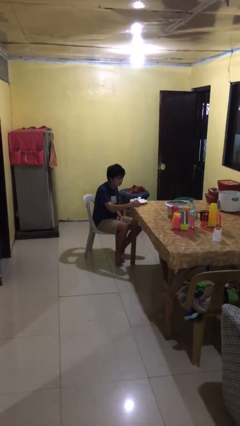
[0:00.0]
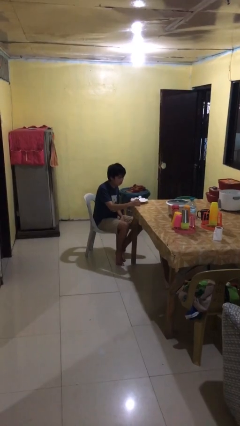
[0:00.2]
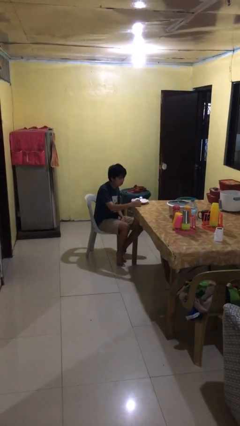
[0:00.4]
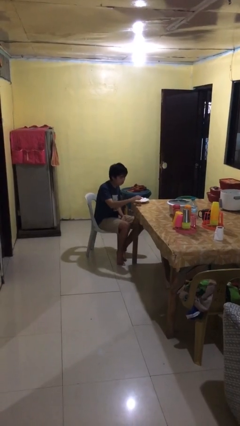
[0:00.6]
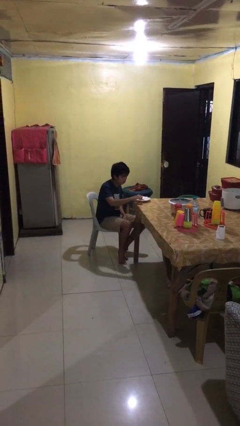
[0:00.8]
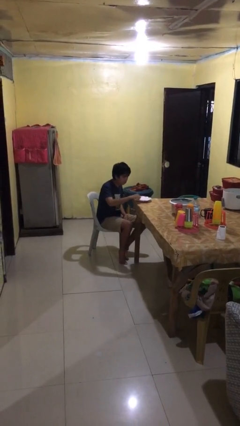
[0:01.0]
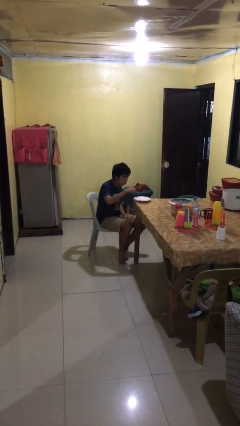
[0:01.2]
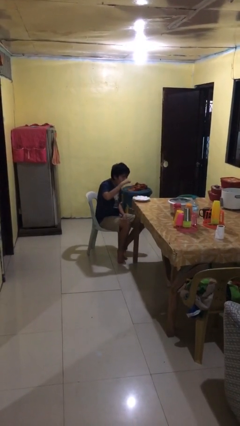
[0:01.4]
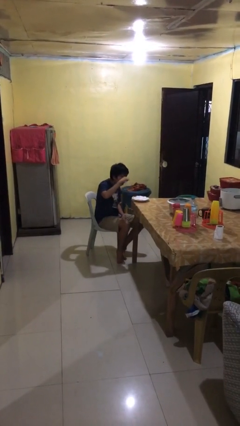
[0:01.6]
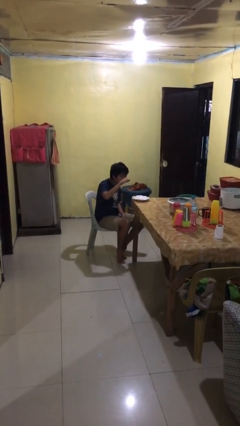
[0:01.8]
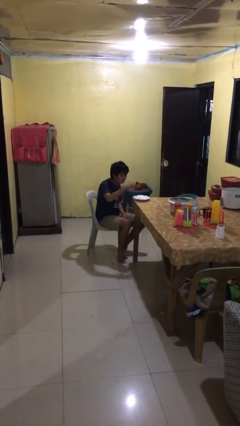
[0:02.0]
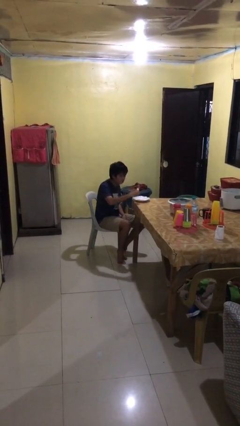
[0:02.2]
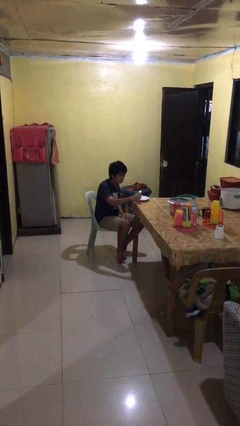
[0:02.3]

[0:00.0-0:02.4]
person eats with utensil

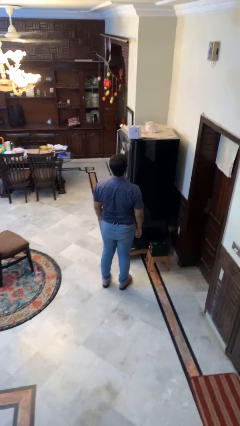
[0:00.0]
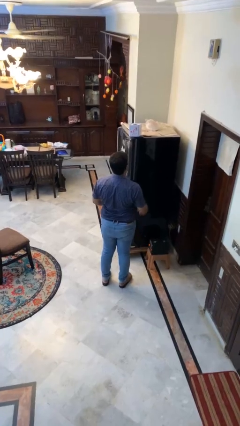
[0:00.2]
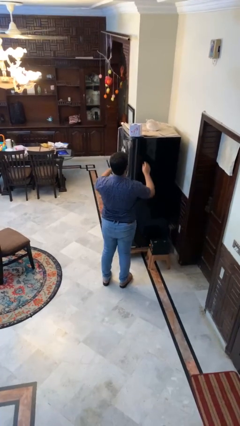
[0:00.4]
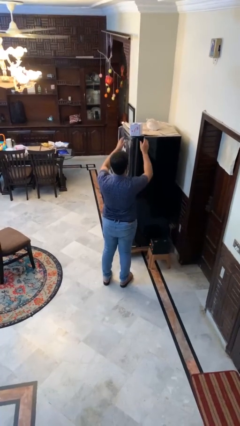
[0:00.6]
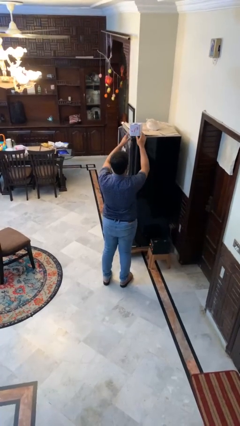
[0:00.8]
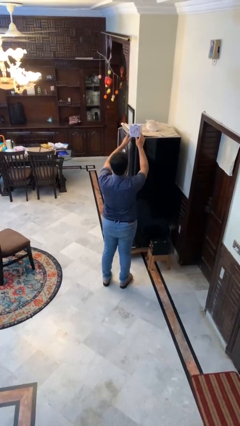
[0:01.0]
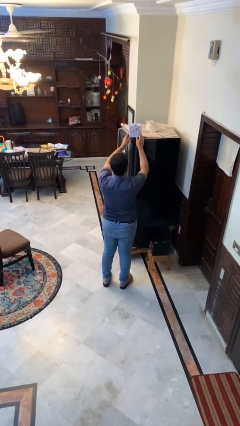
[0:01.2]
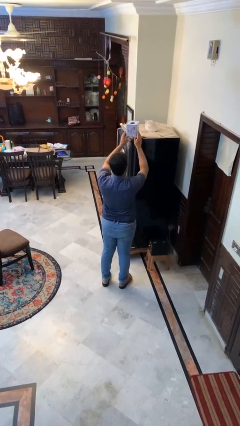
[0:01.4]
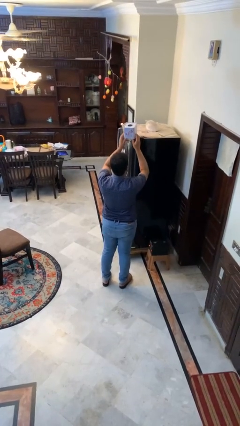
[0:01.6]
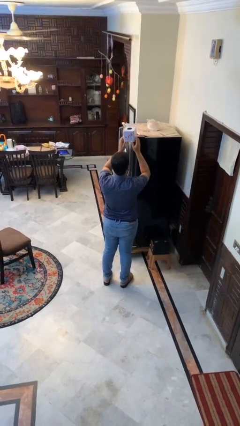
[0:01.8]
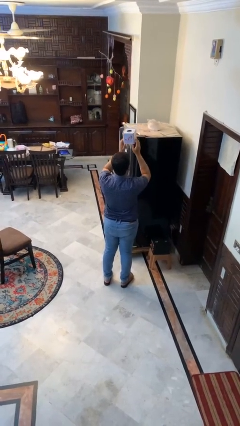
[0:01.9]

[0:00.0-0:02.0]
person picks up object from shelf

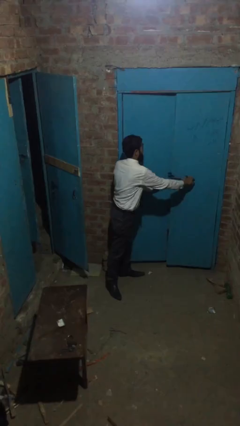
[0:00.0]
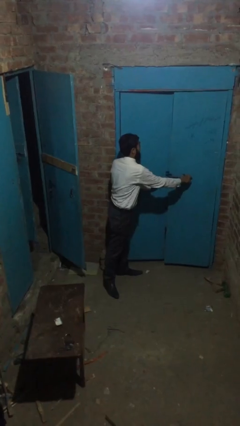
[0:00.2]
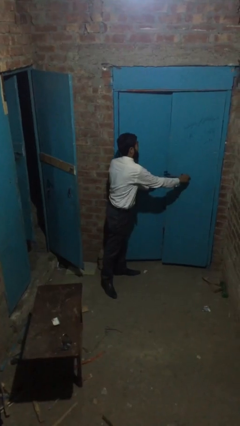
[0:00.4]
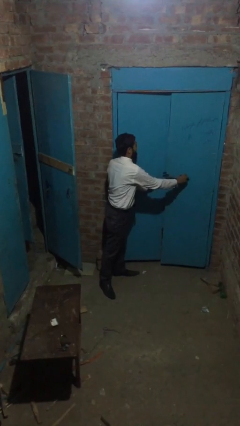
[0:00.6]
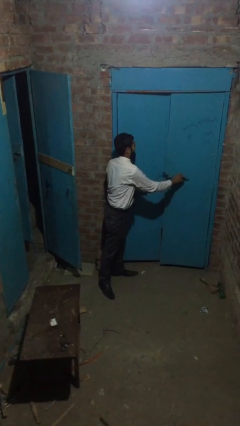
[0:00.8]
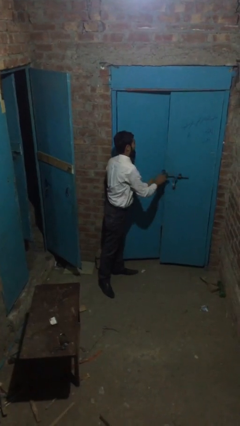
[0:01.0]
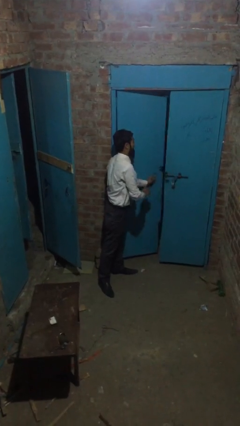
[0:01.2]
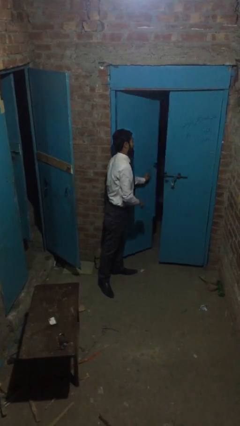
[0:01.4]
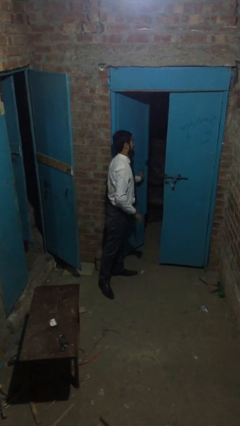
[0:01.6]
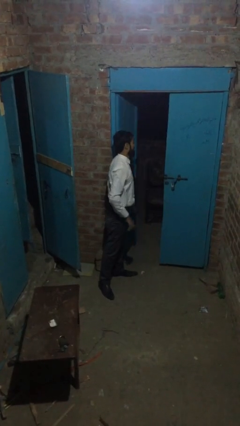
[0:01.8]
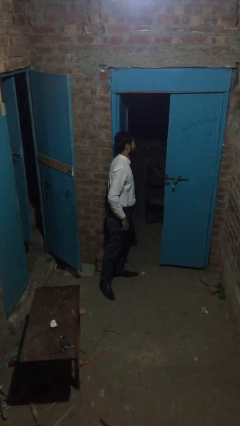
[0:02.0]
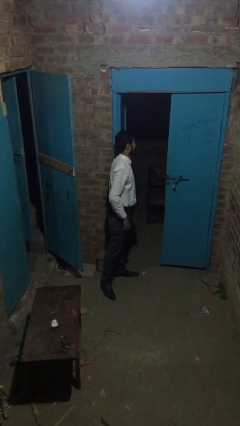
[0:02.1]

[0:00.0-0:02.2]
person opens facility door

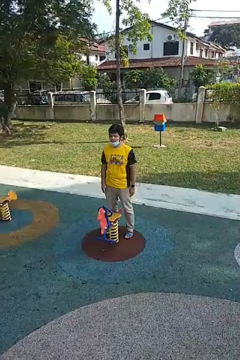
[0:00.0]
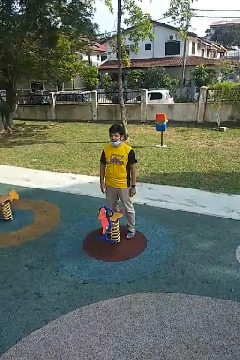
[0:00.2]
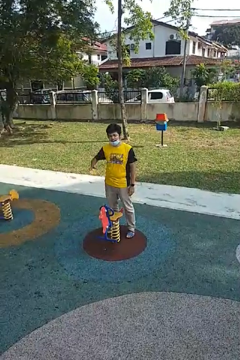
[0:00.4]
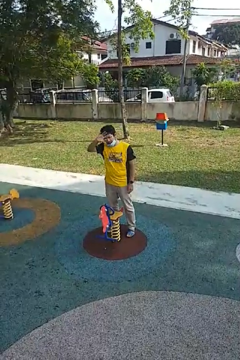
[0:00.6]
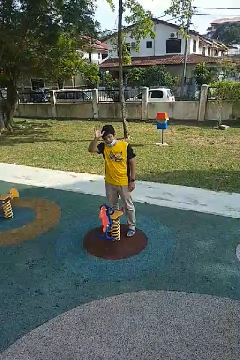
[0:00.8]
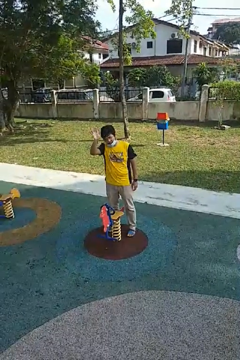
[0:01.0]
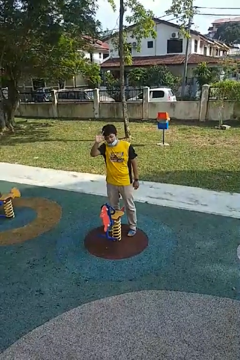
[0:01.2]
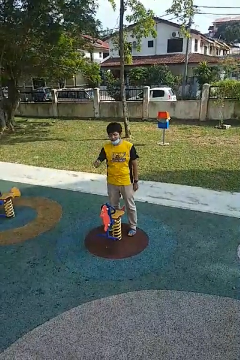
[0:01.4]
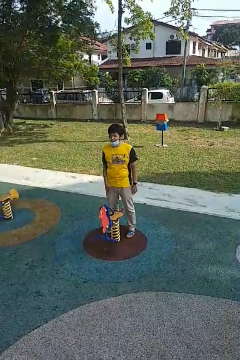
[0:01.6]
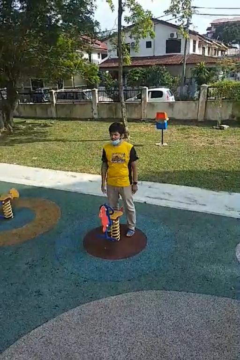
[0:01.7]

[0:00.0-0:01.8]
person waves at person

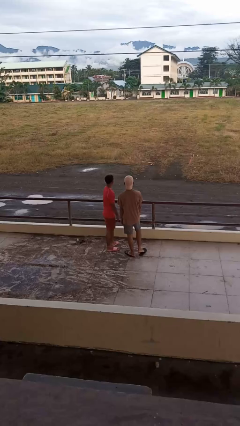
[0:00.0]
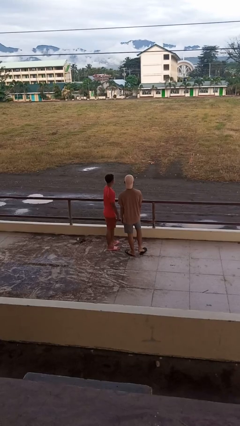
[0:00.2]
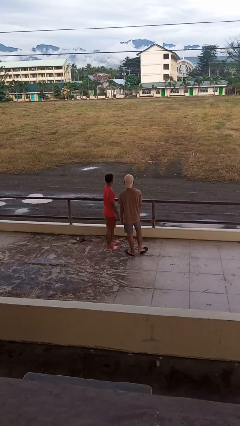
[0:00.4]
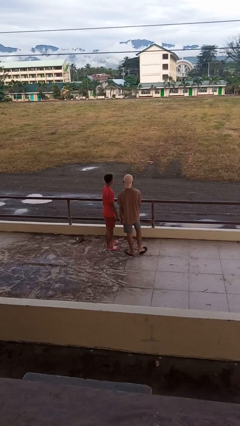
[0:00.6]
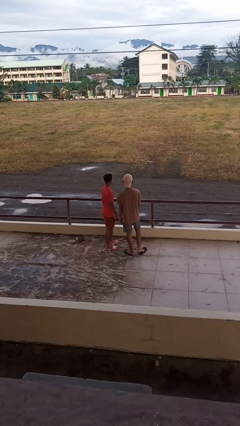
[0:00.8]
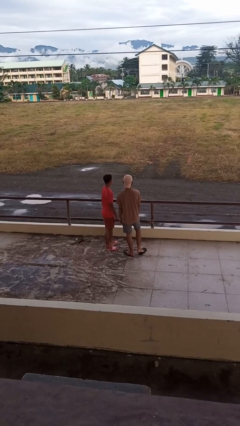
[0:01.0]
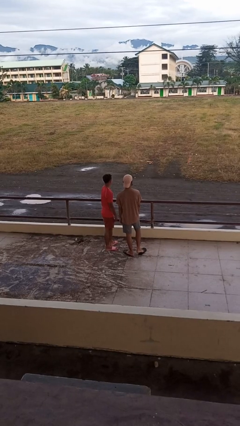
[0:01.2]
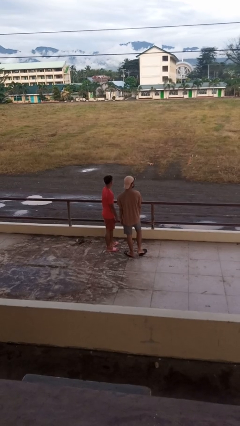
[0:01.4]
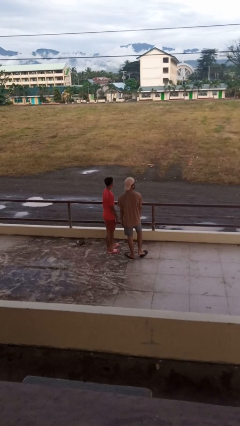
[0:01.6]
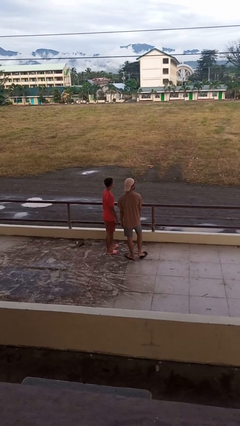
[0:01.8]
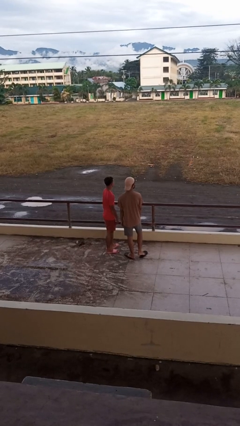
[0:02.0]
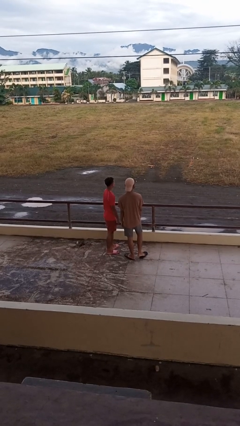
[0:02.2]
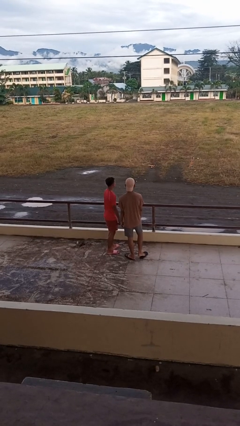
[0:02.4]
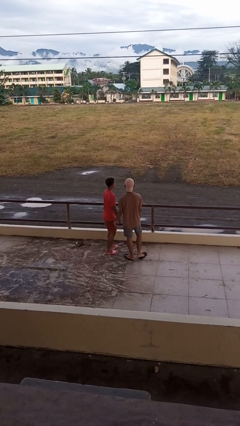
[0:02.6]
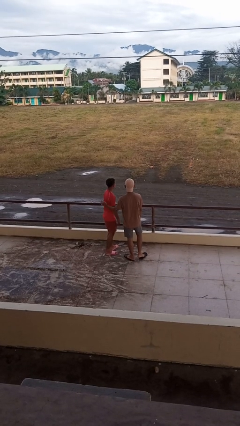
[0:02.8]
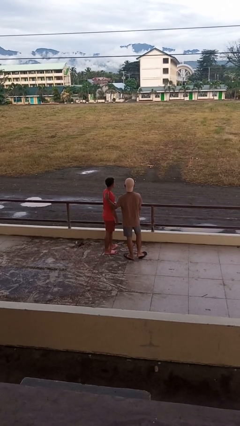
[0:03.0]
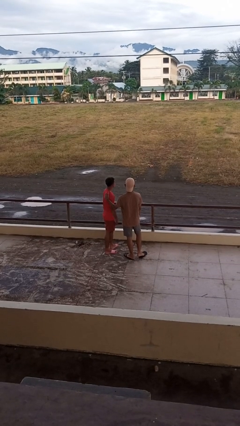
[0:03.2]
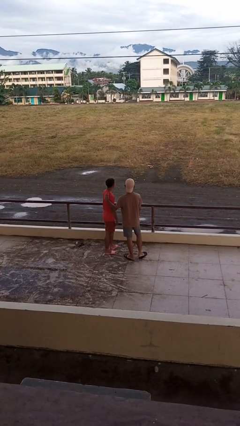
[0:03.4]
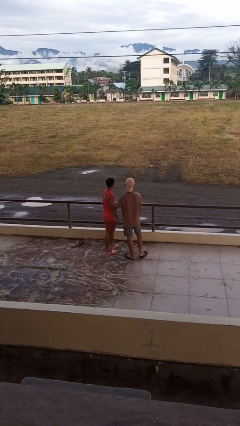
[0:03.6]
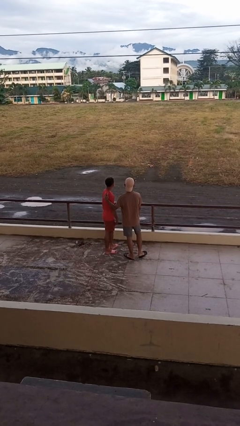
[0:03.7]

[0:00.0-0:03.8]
person touches back of person

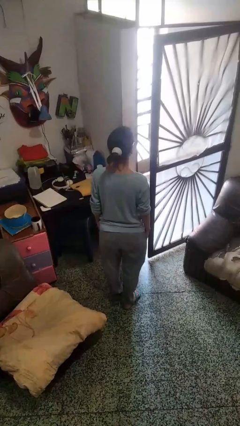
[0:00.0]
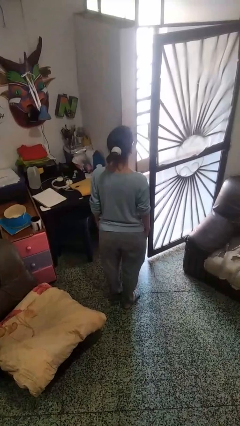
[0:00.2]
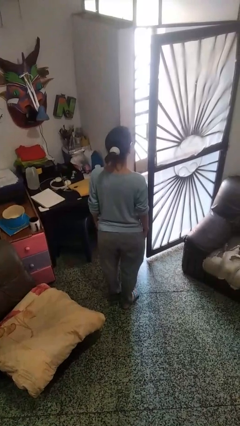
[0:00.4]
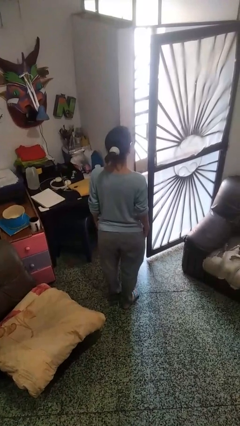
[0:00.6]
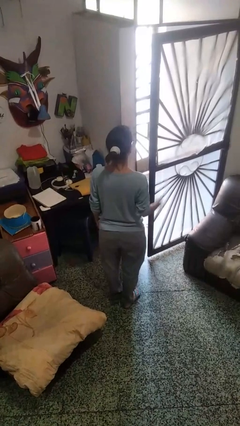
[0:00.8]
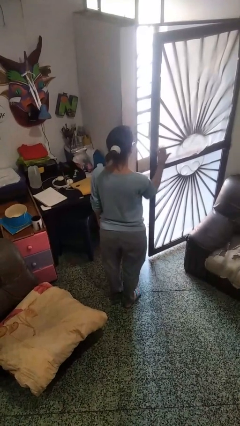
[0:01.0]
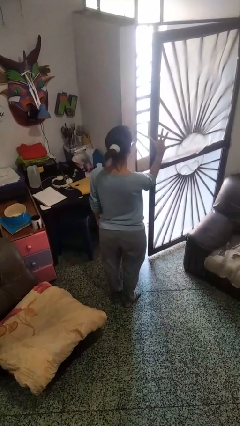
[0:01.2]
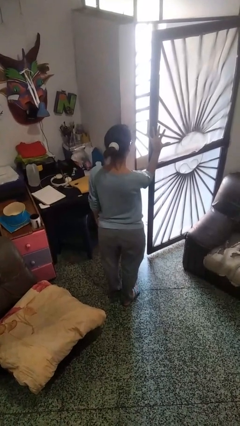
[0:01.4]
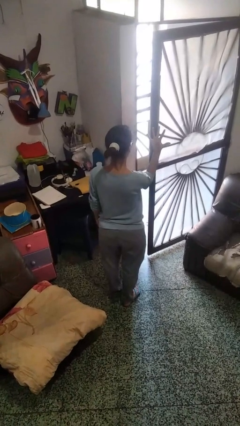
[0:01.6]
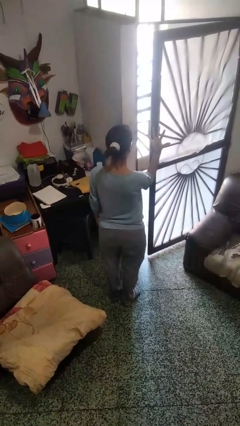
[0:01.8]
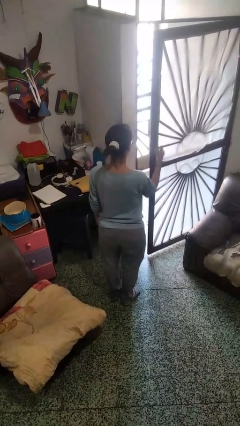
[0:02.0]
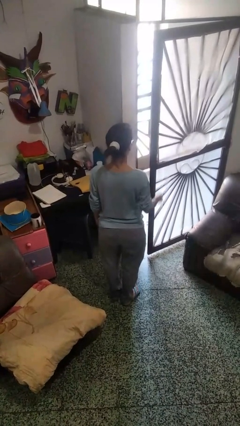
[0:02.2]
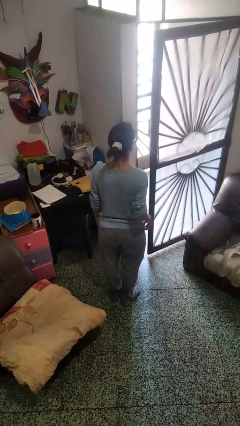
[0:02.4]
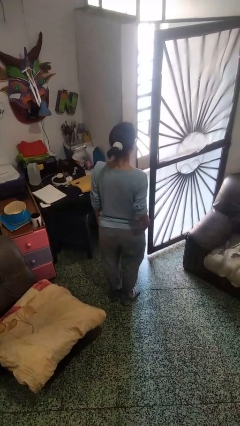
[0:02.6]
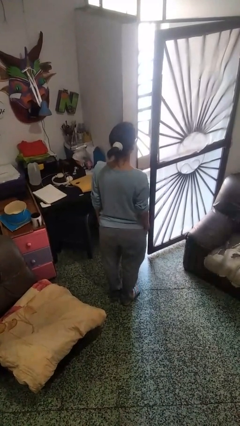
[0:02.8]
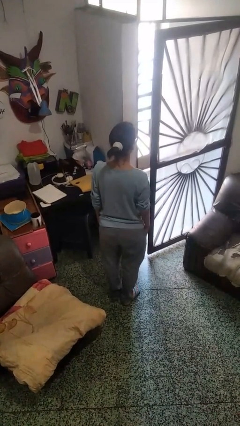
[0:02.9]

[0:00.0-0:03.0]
person gestures number five

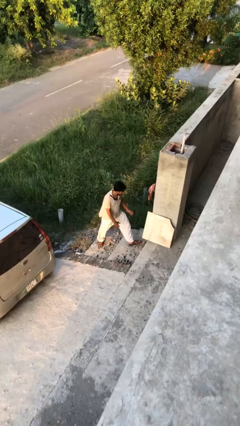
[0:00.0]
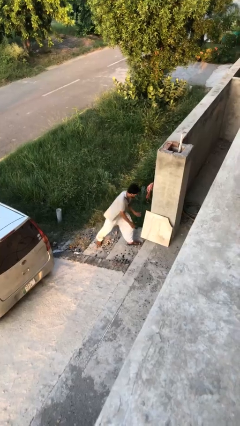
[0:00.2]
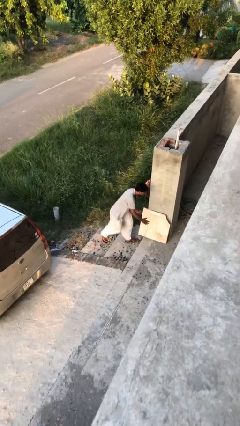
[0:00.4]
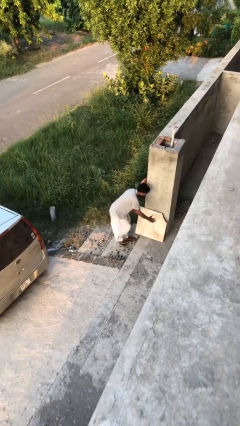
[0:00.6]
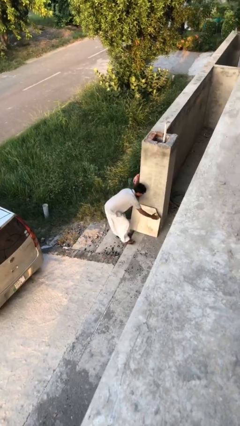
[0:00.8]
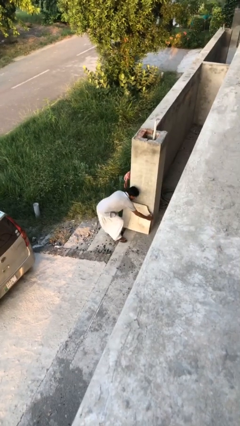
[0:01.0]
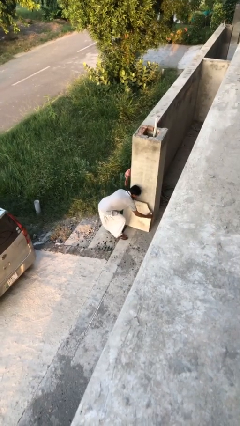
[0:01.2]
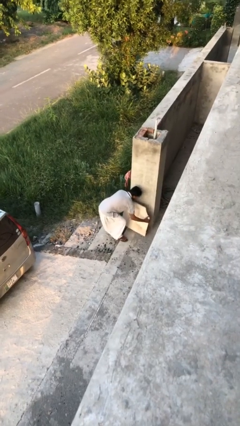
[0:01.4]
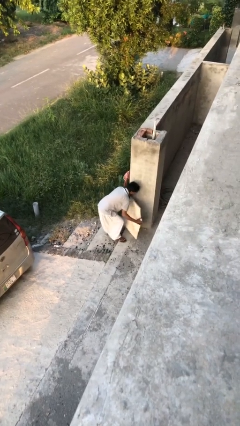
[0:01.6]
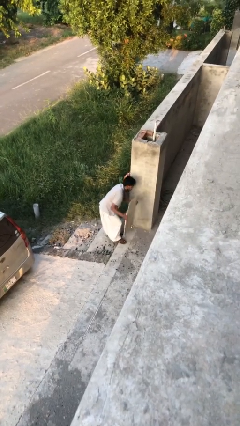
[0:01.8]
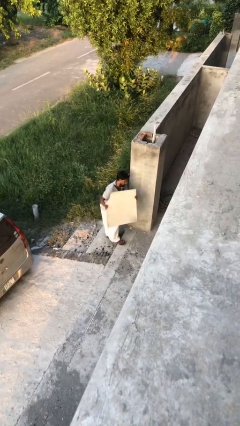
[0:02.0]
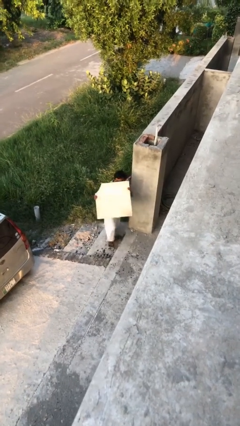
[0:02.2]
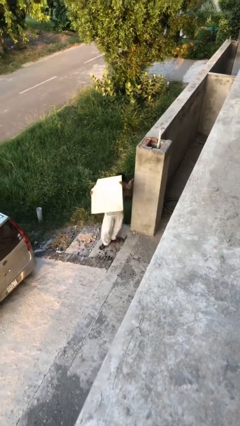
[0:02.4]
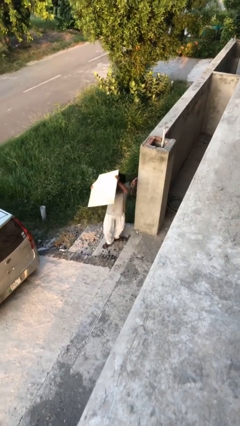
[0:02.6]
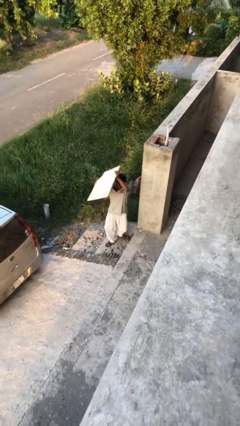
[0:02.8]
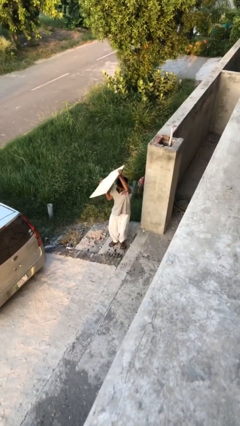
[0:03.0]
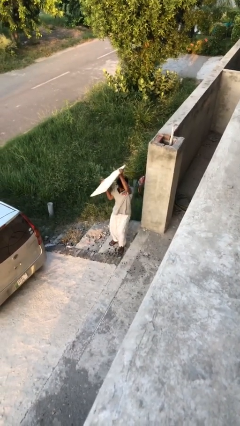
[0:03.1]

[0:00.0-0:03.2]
person picks up object from floor
